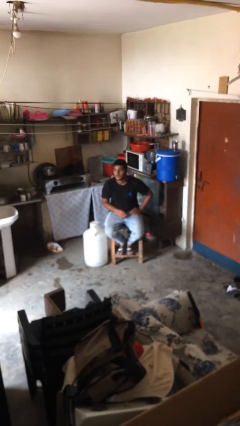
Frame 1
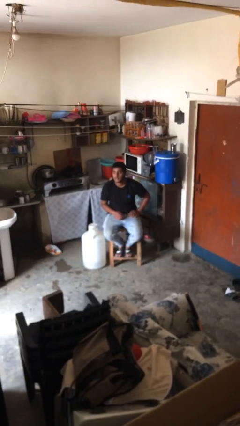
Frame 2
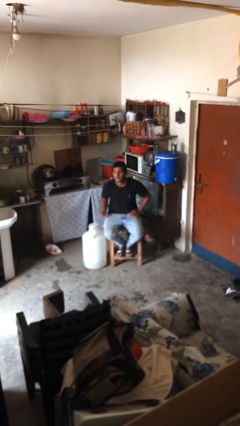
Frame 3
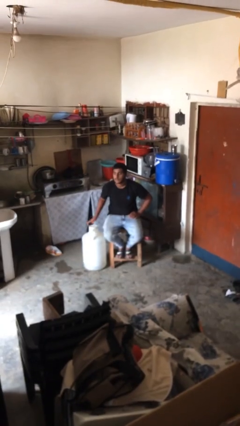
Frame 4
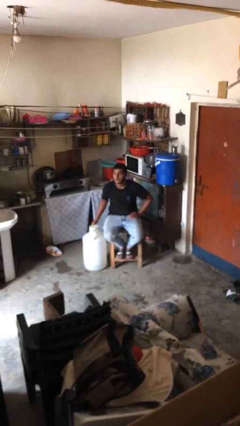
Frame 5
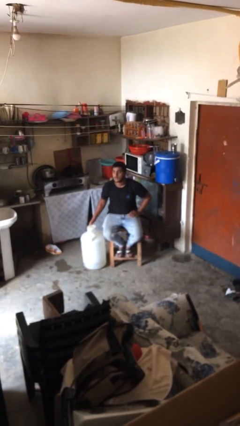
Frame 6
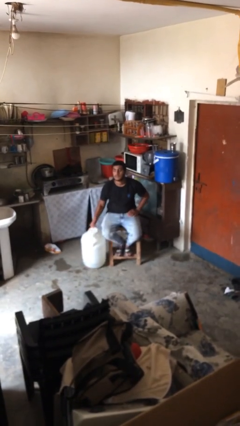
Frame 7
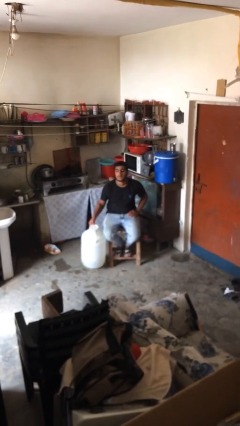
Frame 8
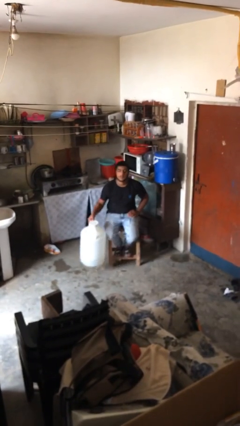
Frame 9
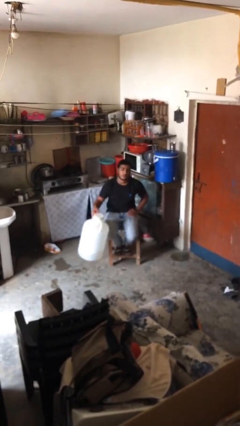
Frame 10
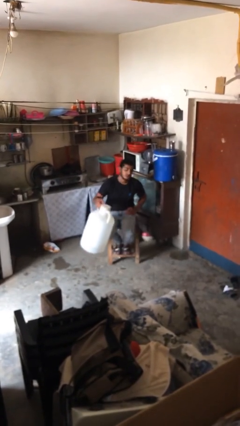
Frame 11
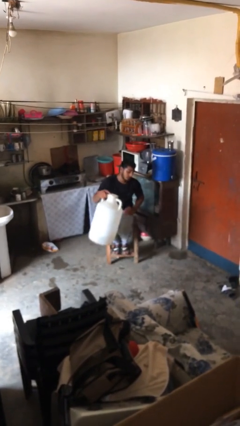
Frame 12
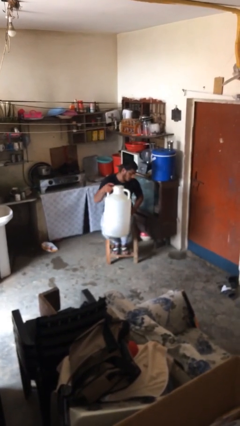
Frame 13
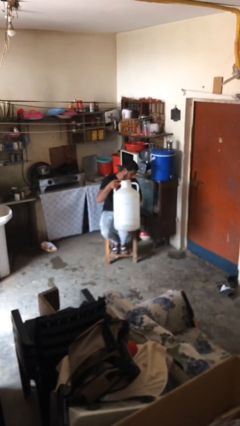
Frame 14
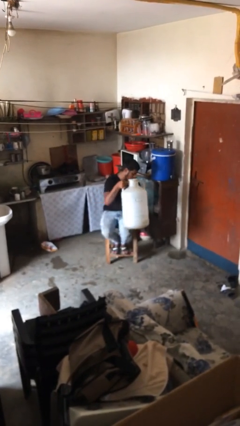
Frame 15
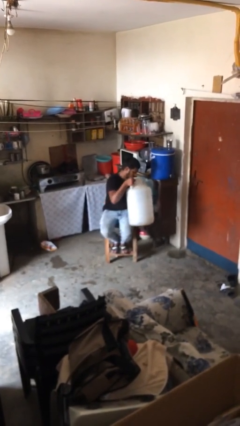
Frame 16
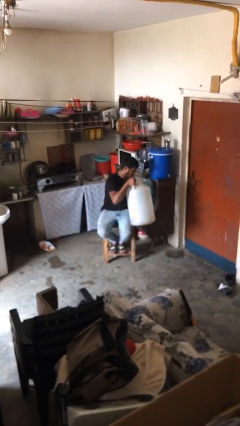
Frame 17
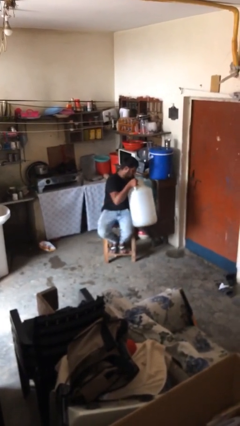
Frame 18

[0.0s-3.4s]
person picks up object from floor

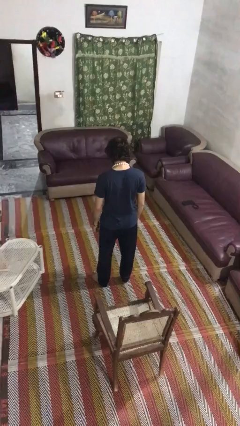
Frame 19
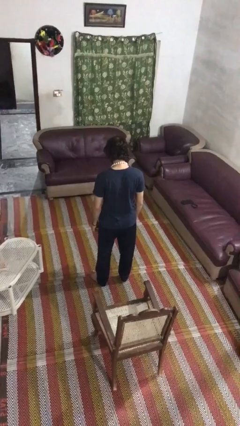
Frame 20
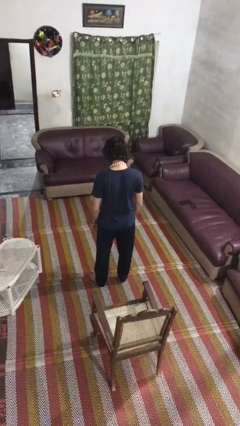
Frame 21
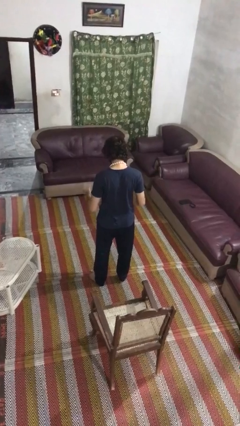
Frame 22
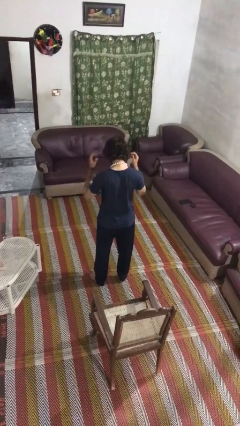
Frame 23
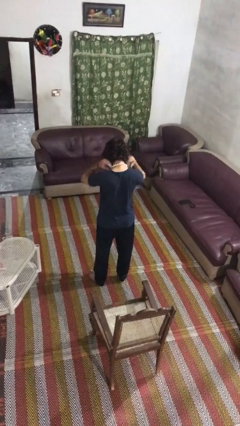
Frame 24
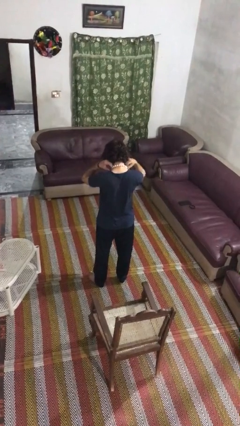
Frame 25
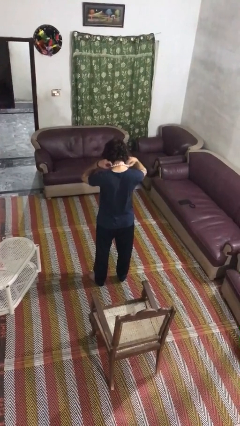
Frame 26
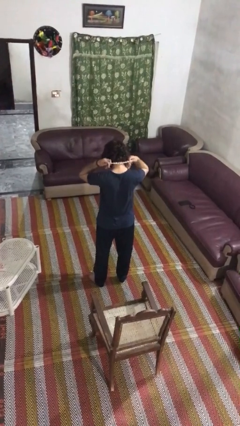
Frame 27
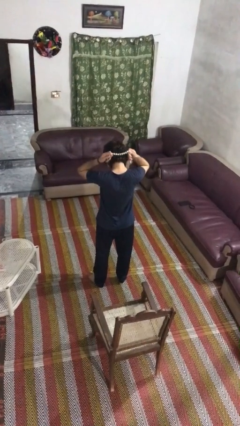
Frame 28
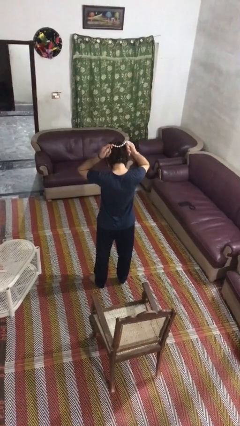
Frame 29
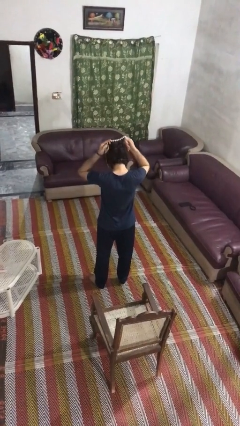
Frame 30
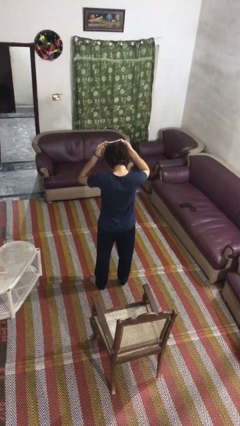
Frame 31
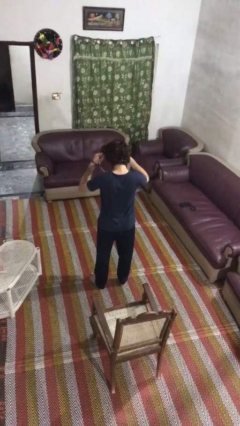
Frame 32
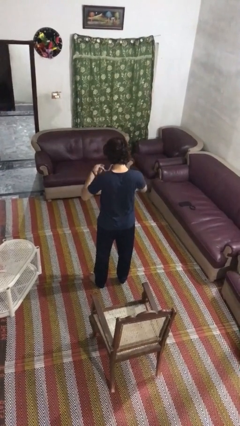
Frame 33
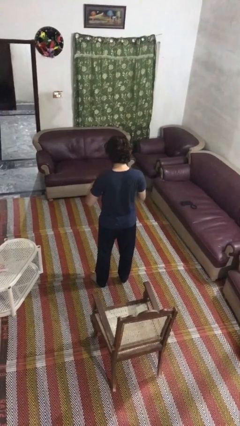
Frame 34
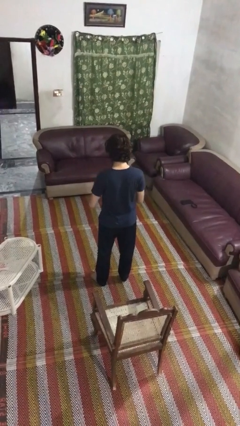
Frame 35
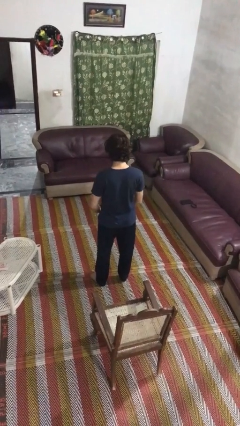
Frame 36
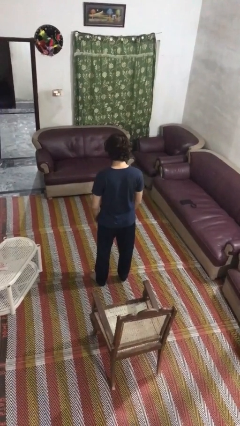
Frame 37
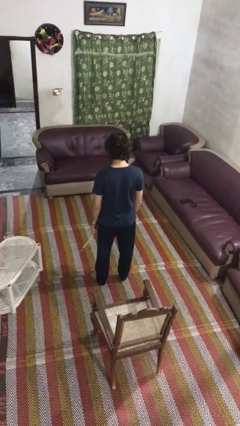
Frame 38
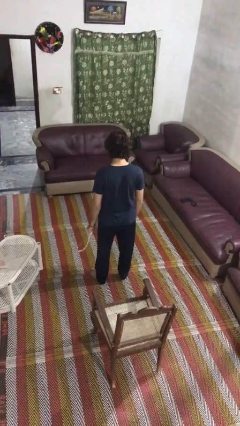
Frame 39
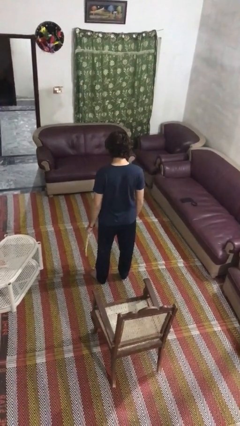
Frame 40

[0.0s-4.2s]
person takes off necklace

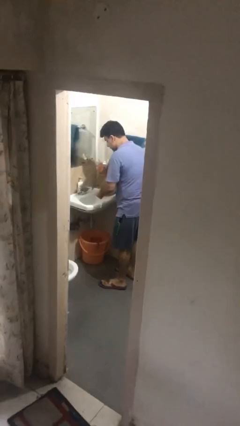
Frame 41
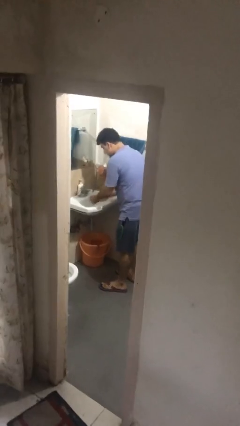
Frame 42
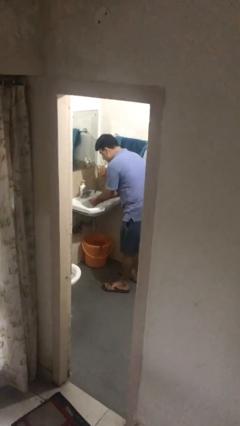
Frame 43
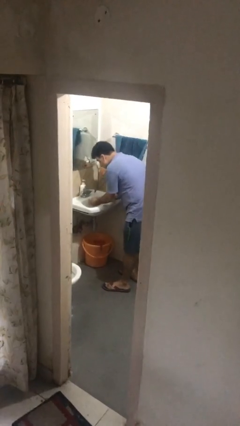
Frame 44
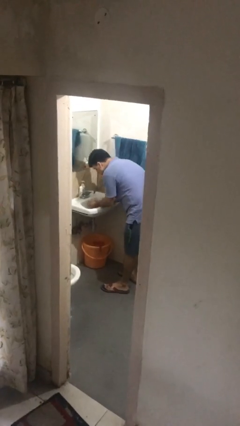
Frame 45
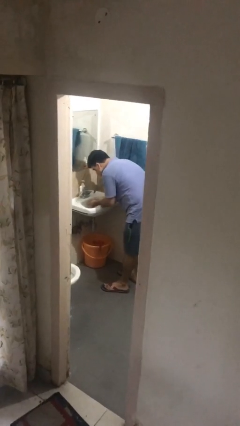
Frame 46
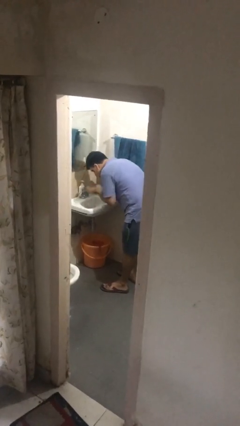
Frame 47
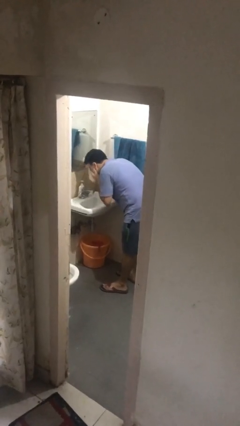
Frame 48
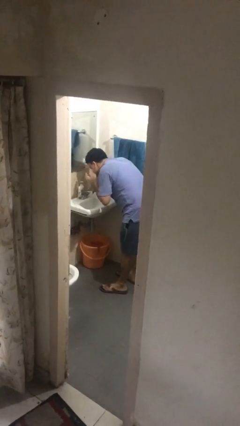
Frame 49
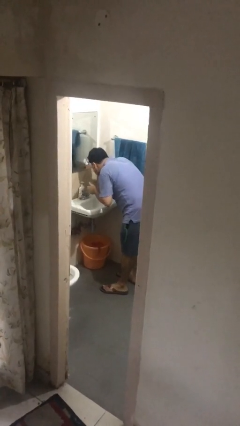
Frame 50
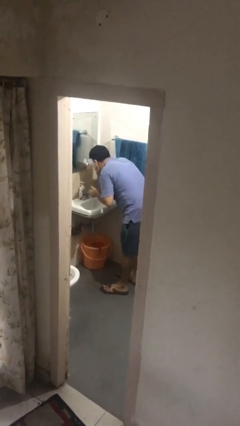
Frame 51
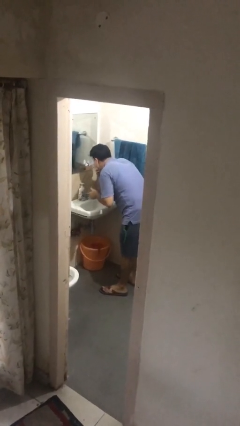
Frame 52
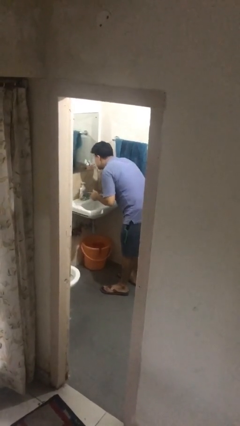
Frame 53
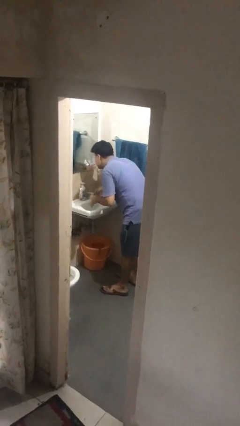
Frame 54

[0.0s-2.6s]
person washes face

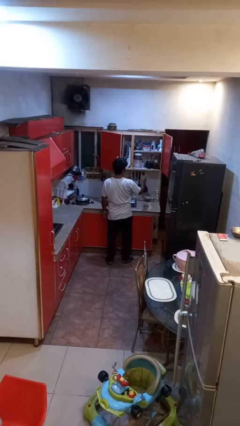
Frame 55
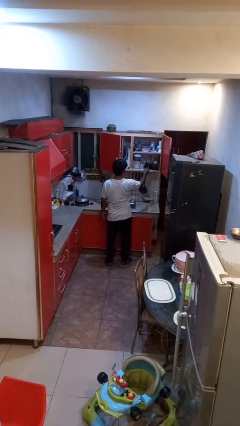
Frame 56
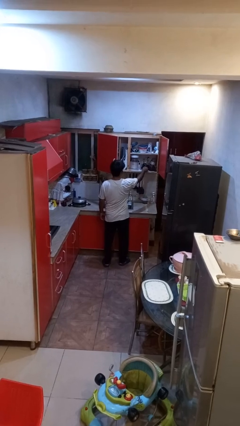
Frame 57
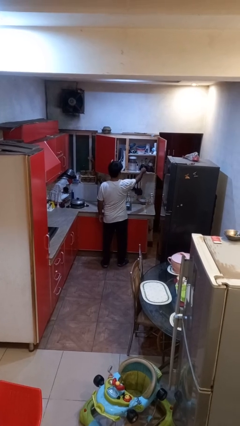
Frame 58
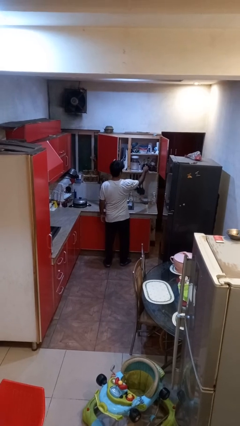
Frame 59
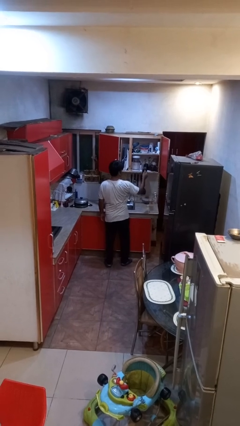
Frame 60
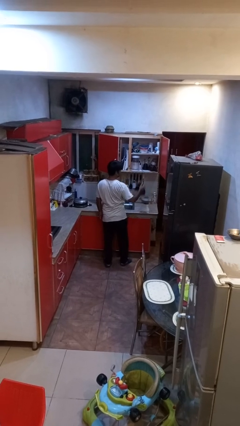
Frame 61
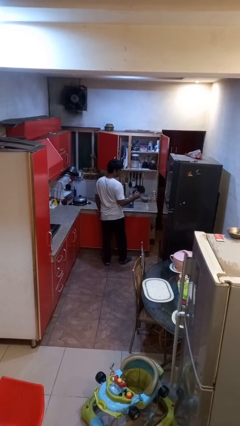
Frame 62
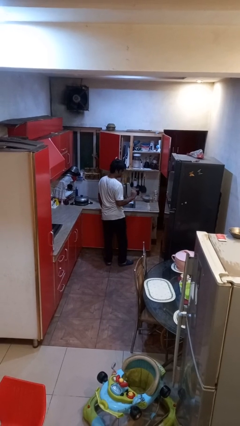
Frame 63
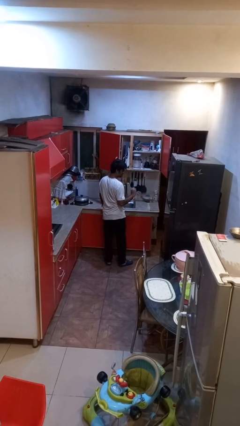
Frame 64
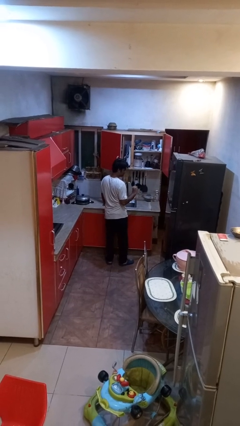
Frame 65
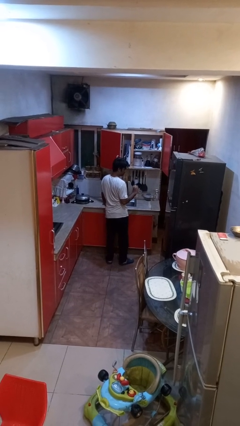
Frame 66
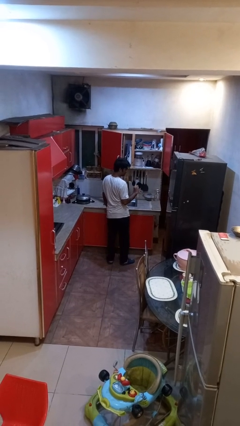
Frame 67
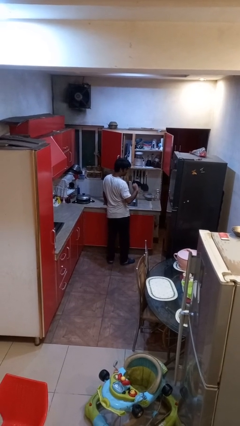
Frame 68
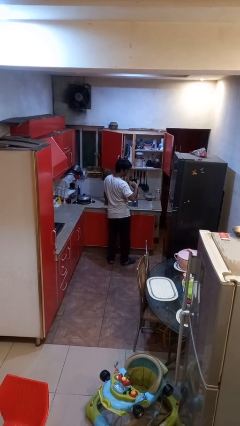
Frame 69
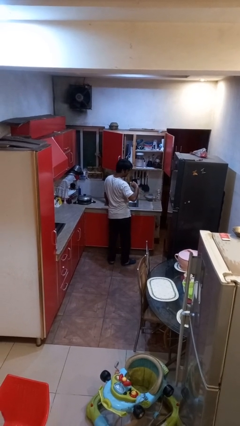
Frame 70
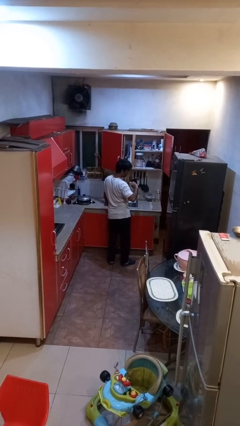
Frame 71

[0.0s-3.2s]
person picks up object from cabinet

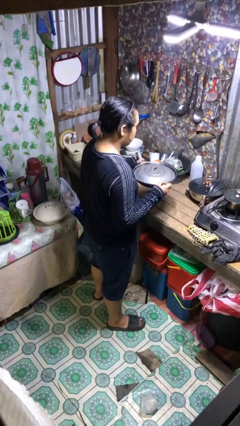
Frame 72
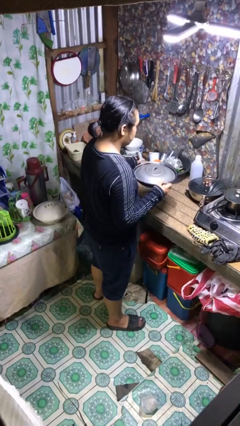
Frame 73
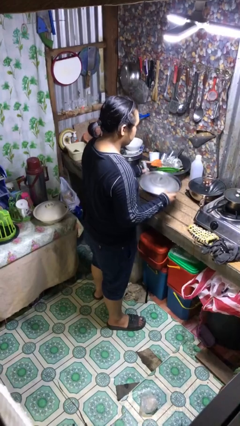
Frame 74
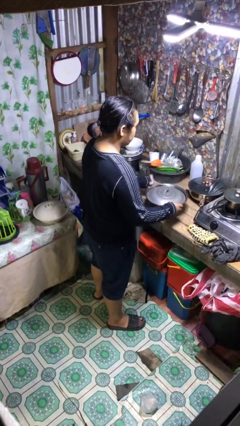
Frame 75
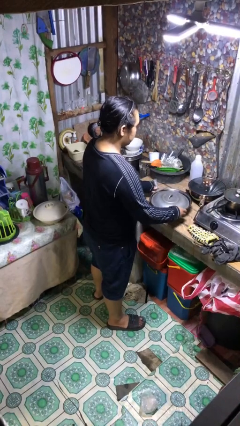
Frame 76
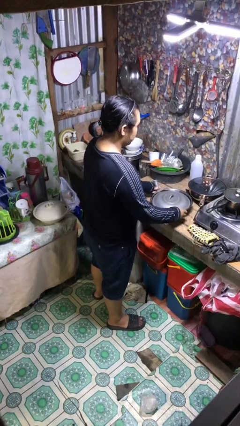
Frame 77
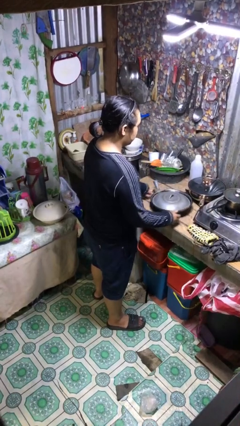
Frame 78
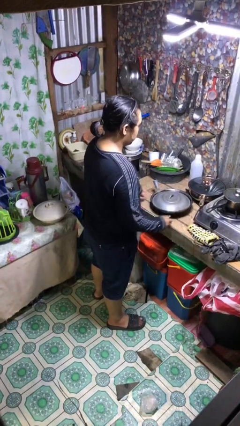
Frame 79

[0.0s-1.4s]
person puts down object on countertop

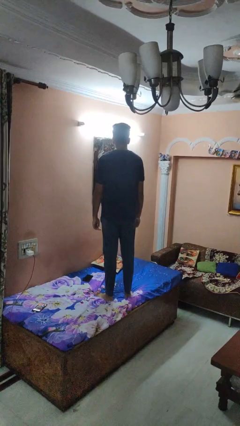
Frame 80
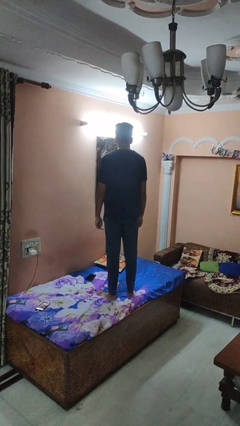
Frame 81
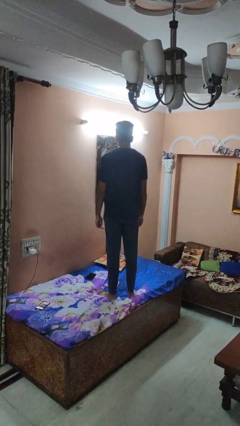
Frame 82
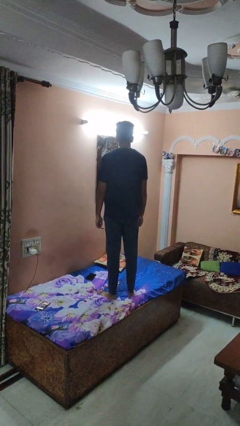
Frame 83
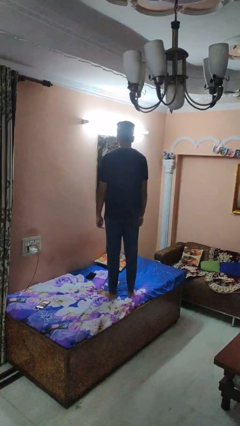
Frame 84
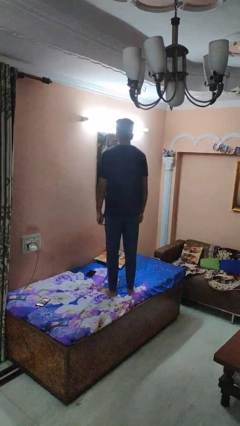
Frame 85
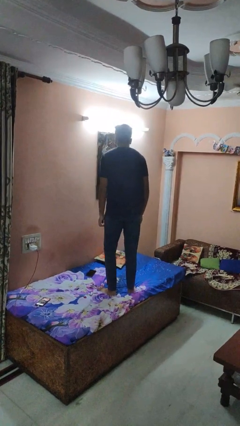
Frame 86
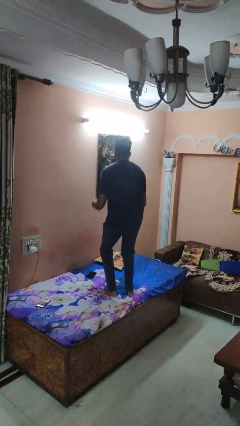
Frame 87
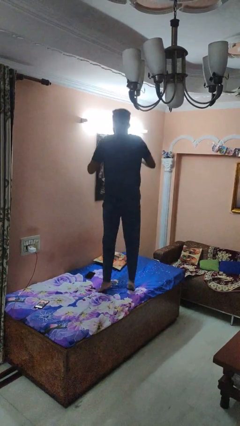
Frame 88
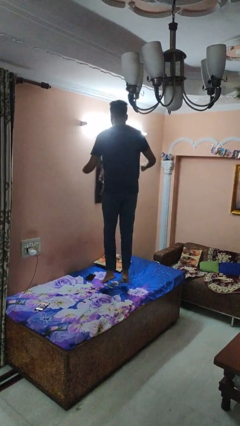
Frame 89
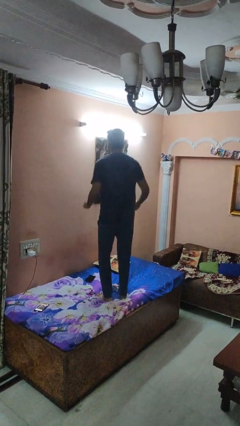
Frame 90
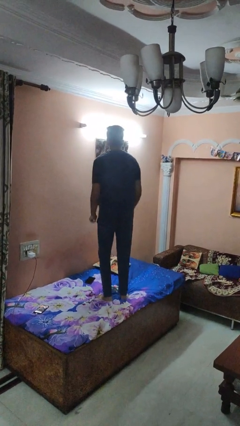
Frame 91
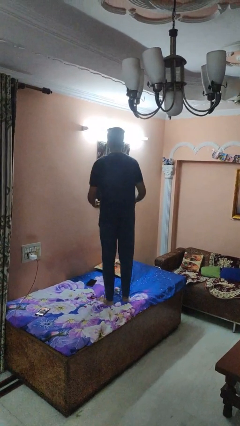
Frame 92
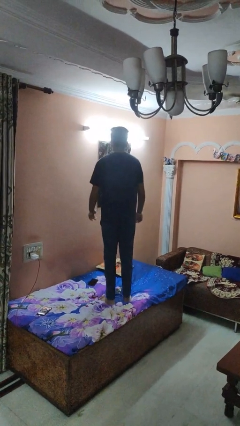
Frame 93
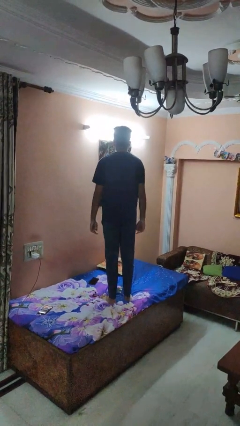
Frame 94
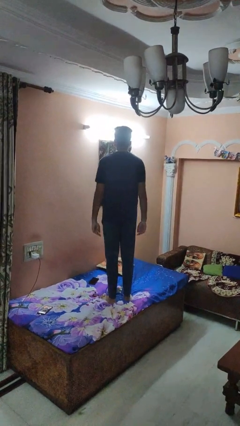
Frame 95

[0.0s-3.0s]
person jumps on bed
